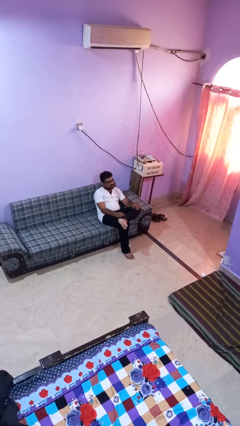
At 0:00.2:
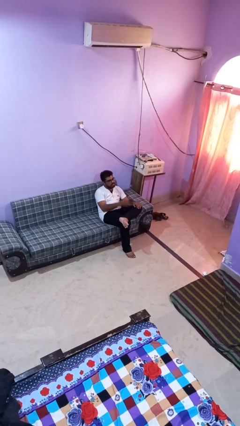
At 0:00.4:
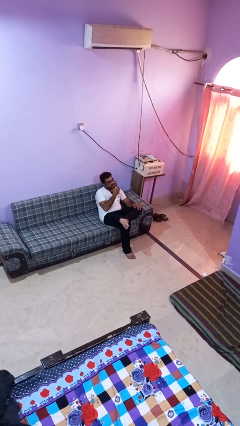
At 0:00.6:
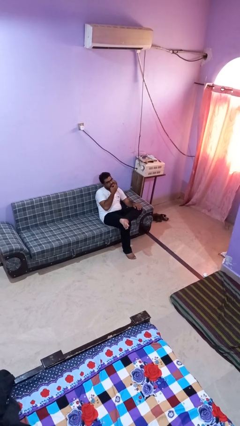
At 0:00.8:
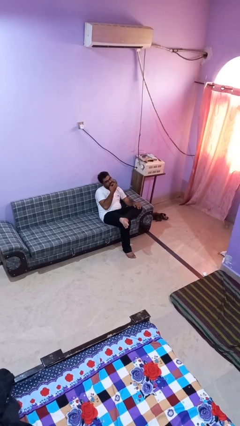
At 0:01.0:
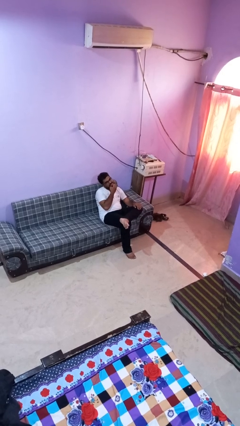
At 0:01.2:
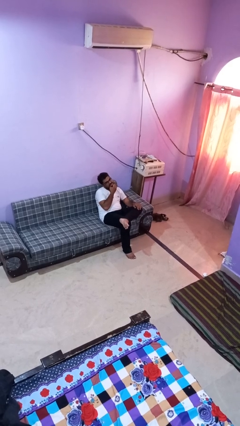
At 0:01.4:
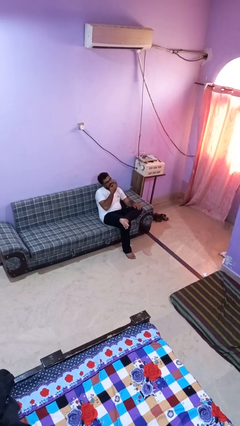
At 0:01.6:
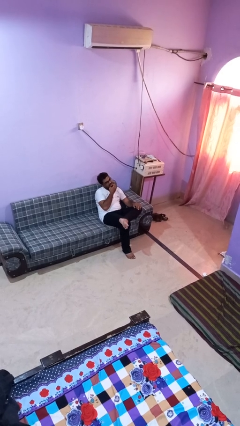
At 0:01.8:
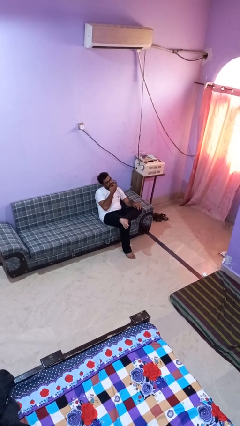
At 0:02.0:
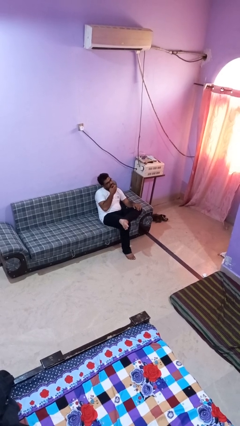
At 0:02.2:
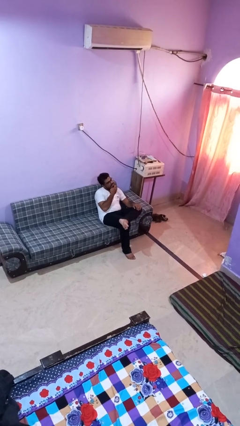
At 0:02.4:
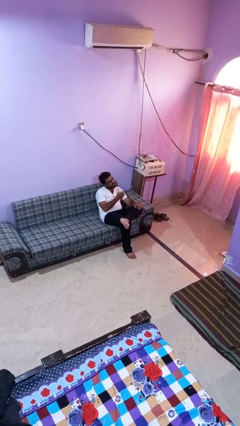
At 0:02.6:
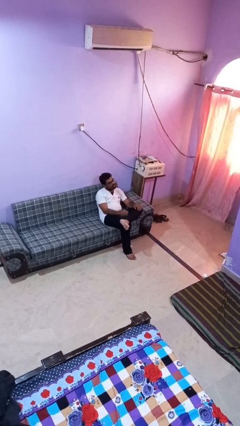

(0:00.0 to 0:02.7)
person strokes chin

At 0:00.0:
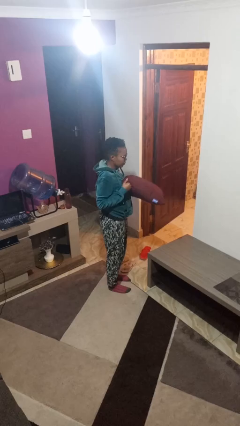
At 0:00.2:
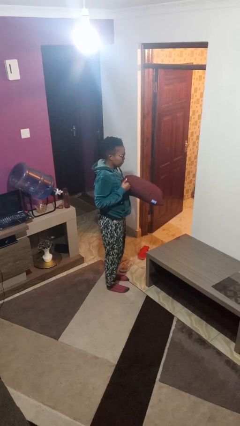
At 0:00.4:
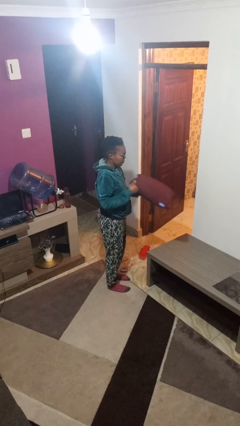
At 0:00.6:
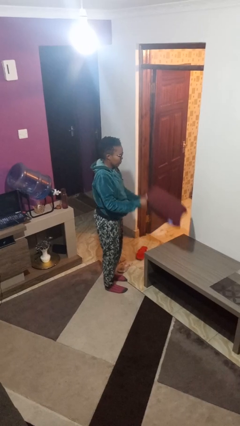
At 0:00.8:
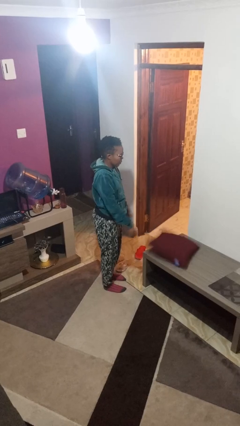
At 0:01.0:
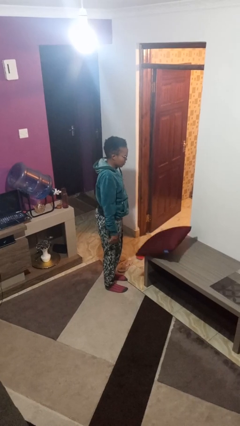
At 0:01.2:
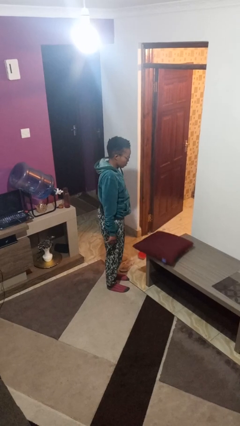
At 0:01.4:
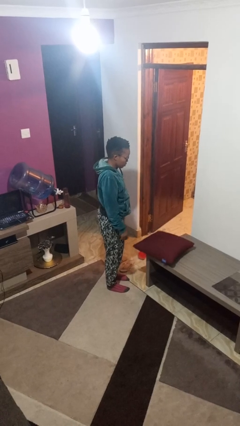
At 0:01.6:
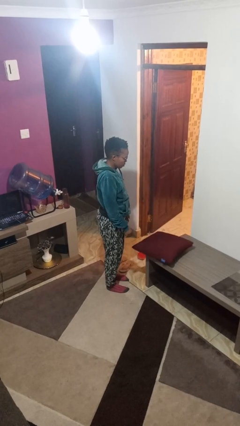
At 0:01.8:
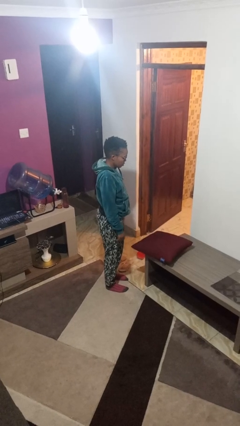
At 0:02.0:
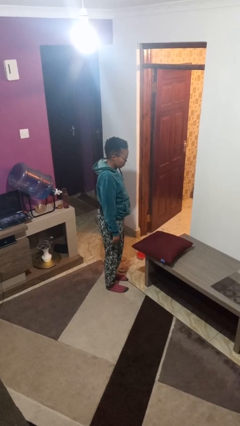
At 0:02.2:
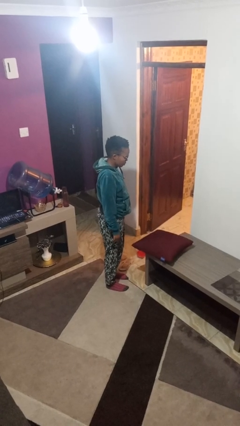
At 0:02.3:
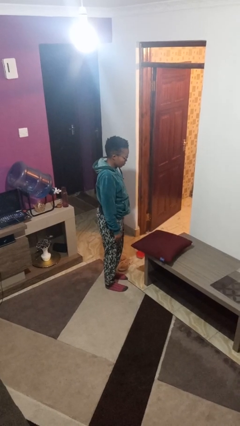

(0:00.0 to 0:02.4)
person throws object on table

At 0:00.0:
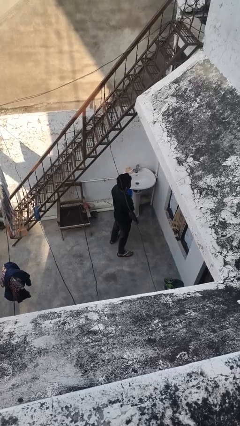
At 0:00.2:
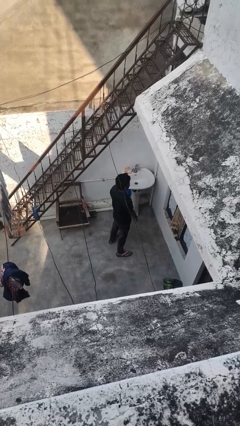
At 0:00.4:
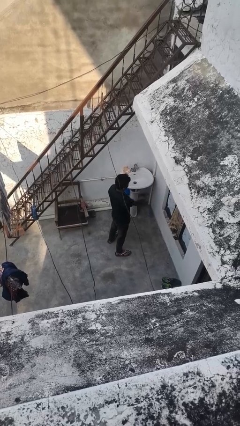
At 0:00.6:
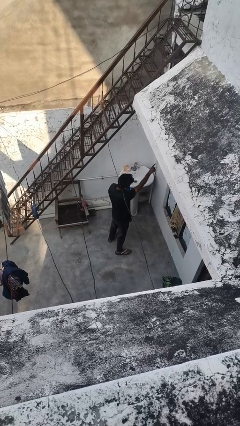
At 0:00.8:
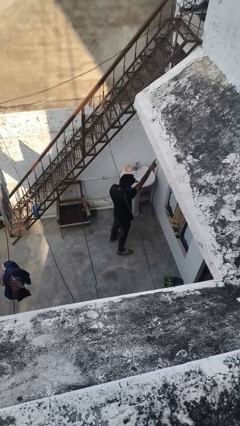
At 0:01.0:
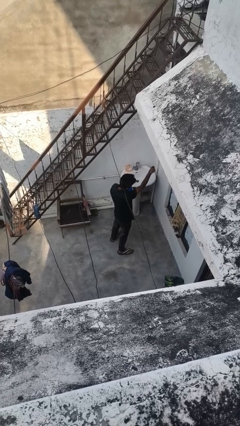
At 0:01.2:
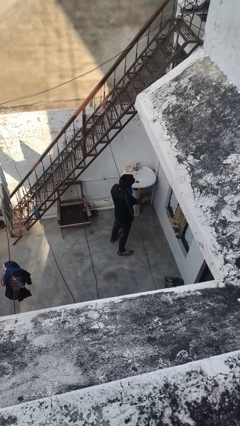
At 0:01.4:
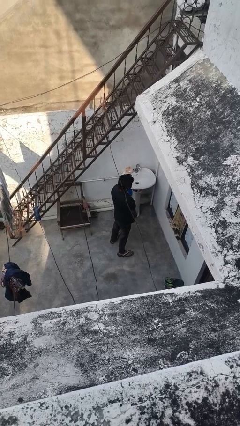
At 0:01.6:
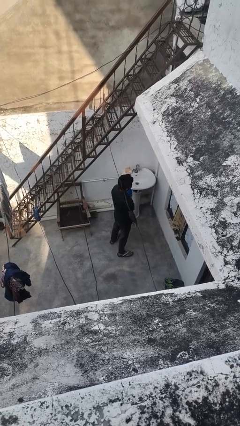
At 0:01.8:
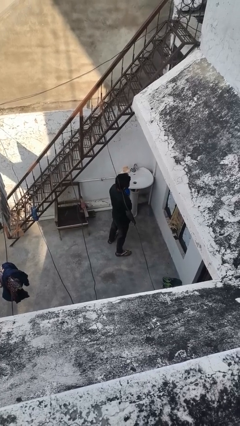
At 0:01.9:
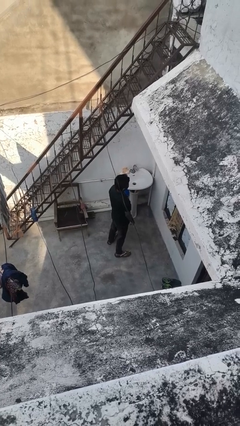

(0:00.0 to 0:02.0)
person gestures behind me

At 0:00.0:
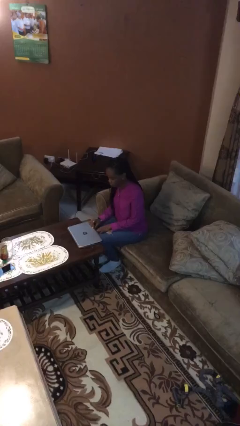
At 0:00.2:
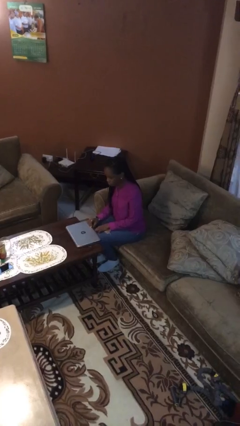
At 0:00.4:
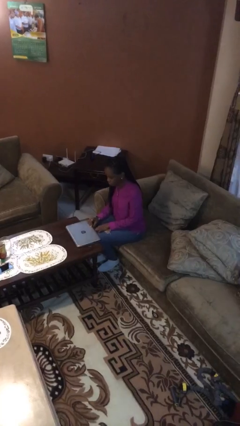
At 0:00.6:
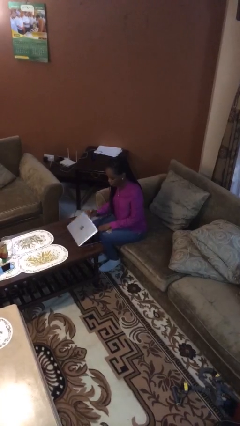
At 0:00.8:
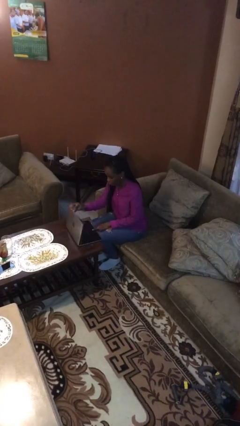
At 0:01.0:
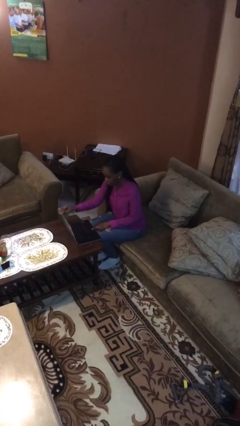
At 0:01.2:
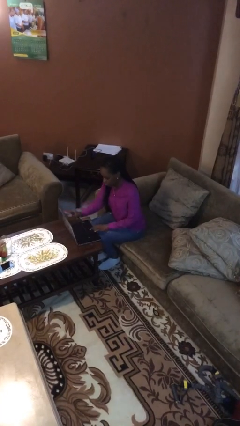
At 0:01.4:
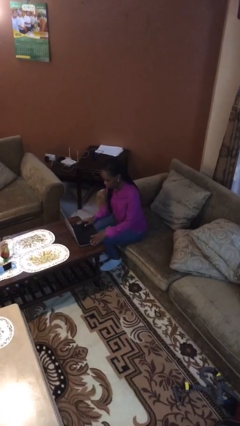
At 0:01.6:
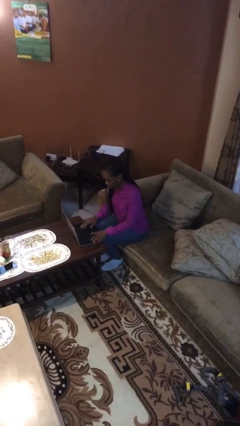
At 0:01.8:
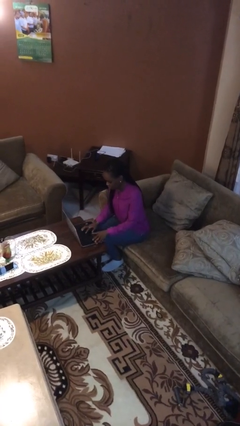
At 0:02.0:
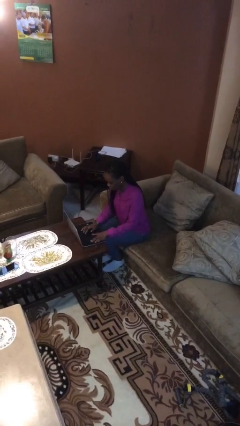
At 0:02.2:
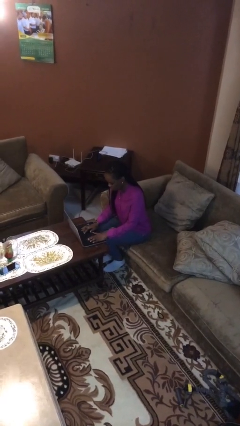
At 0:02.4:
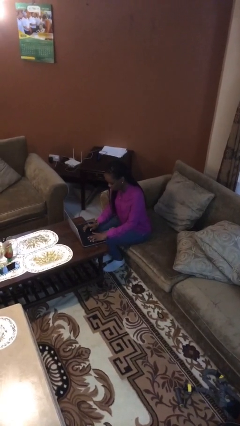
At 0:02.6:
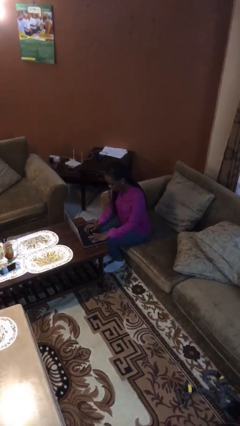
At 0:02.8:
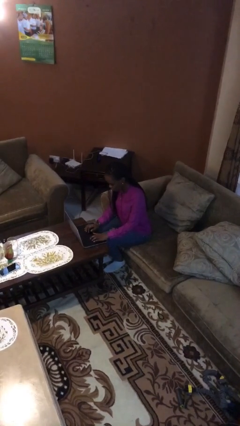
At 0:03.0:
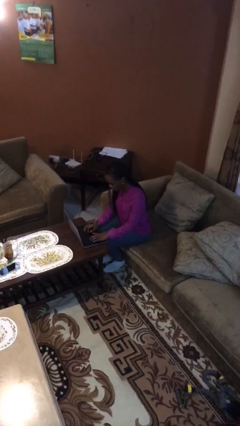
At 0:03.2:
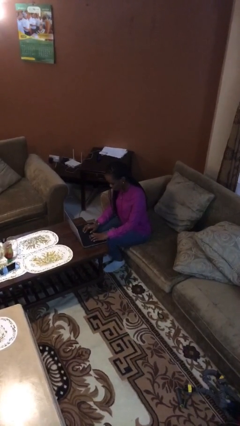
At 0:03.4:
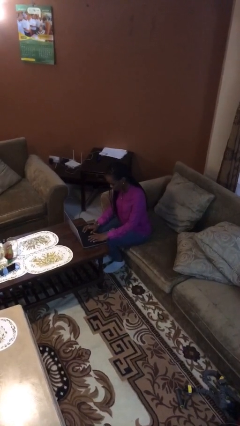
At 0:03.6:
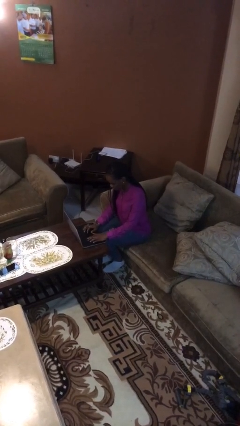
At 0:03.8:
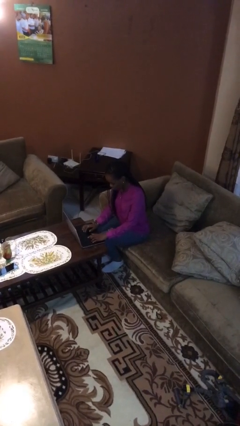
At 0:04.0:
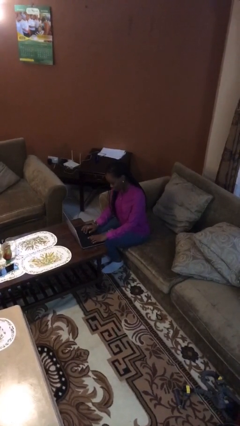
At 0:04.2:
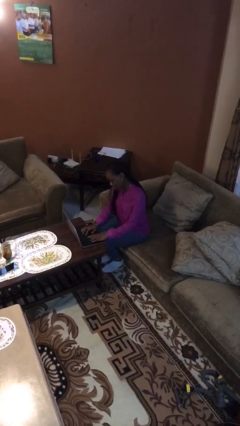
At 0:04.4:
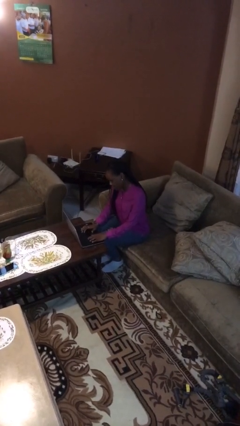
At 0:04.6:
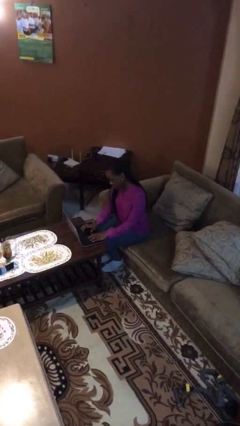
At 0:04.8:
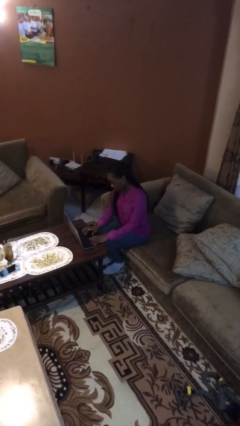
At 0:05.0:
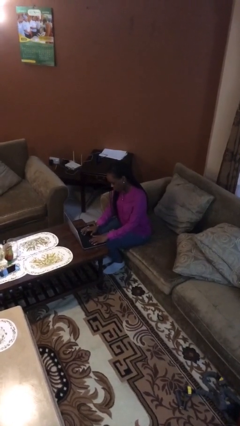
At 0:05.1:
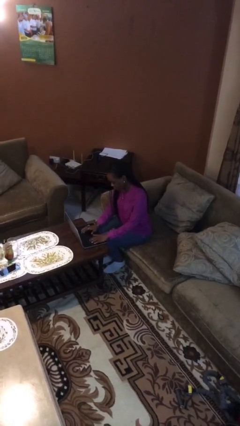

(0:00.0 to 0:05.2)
person interacts with laptop

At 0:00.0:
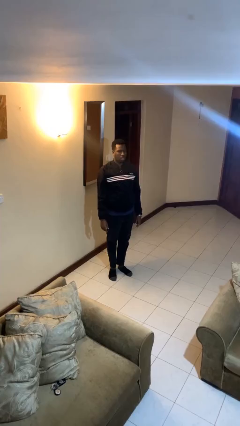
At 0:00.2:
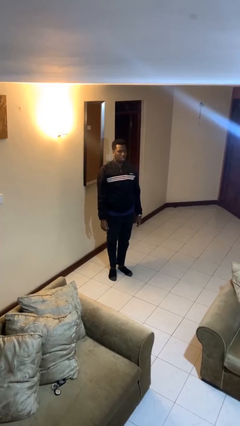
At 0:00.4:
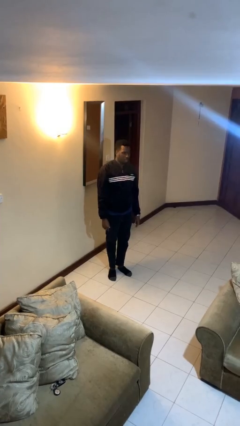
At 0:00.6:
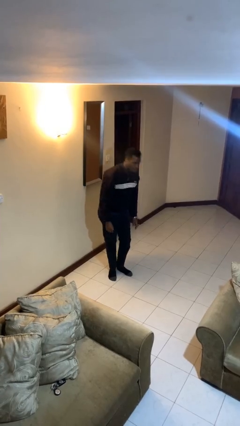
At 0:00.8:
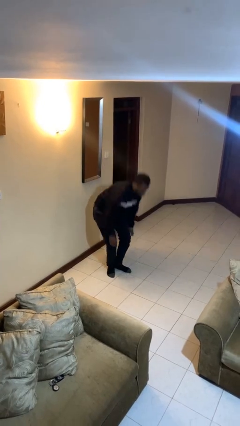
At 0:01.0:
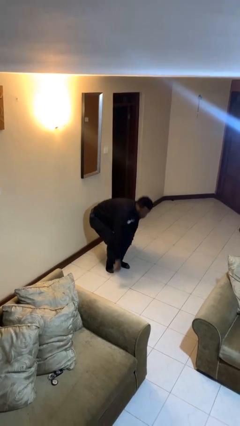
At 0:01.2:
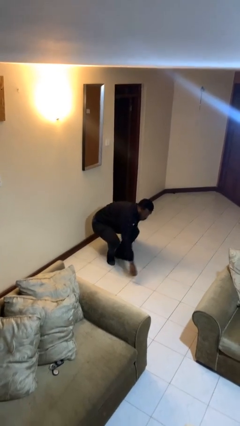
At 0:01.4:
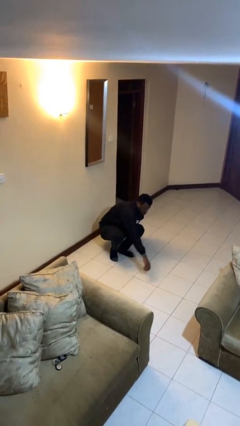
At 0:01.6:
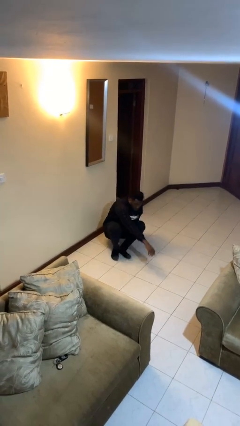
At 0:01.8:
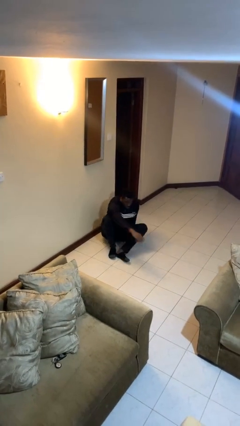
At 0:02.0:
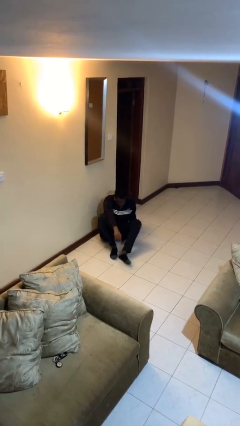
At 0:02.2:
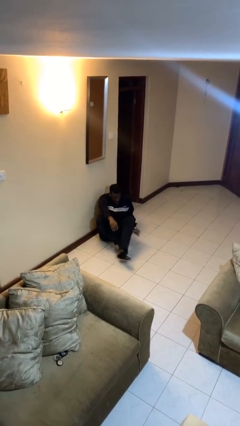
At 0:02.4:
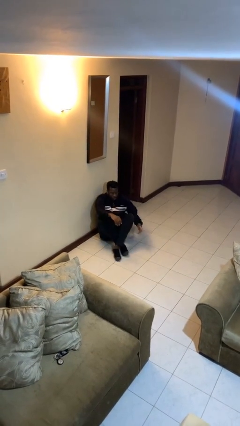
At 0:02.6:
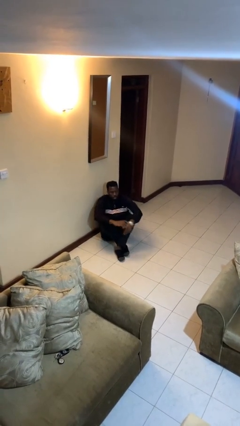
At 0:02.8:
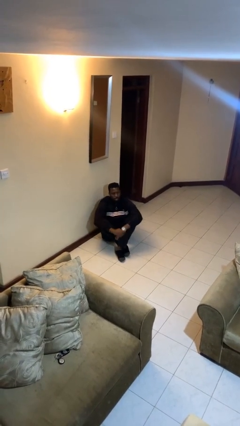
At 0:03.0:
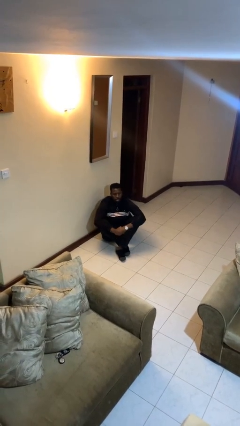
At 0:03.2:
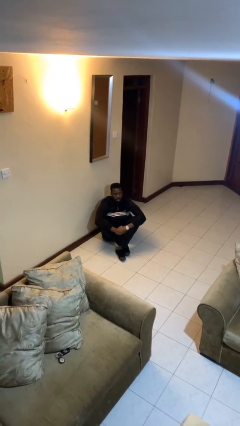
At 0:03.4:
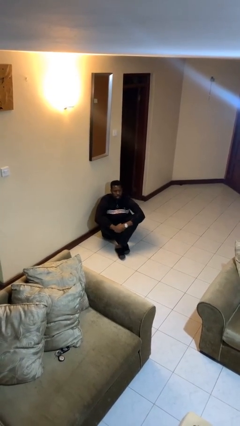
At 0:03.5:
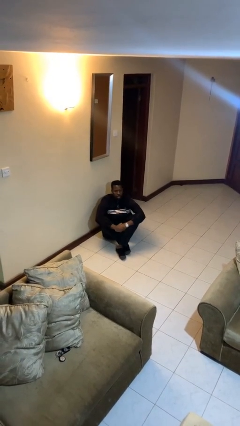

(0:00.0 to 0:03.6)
person sits crisscross

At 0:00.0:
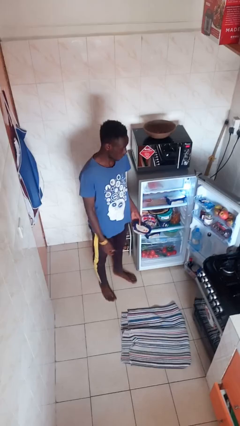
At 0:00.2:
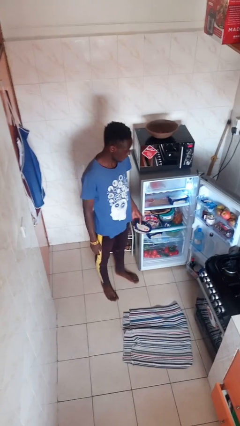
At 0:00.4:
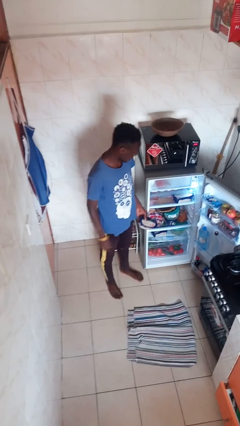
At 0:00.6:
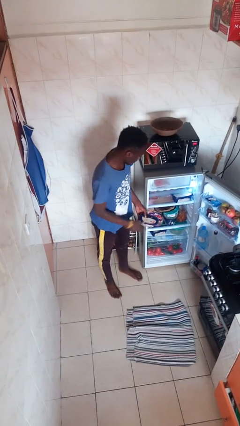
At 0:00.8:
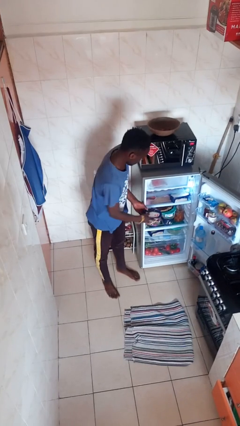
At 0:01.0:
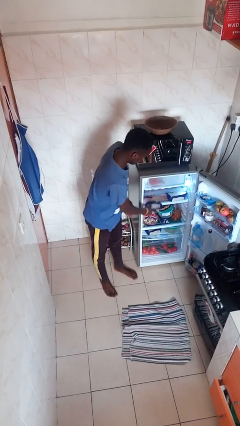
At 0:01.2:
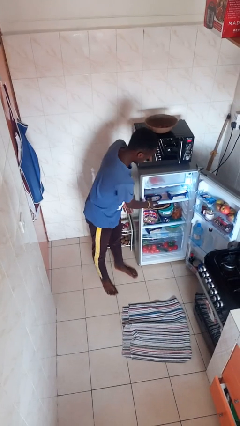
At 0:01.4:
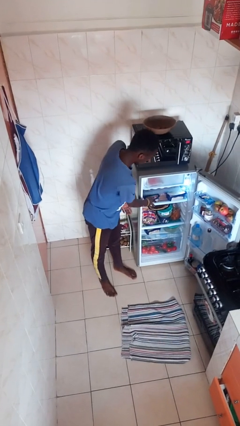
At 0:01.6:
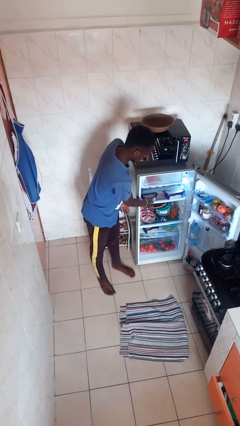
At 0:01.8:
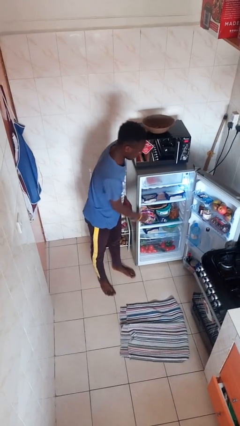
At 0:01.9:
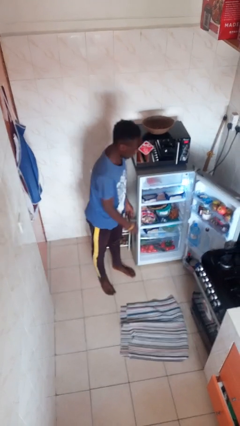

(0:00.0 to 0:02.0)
person puts object into refrigerator
